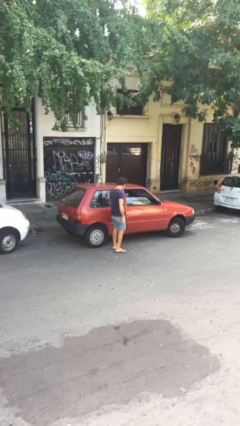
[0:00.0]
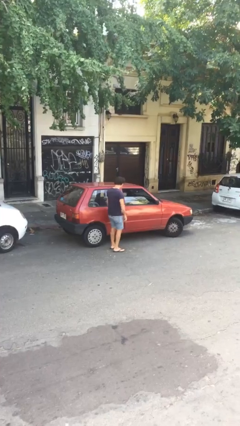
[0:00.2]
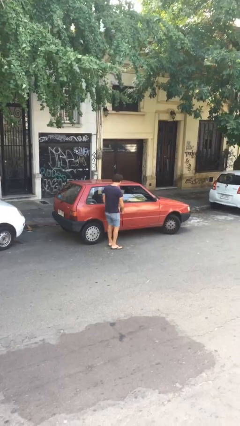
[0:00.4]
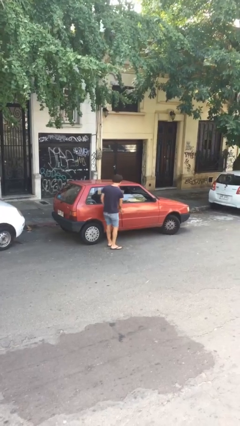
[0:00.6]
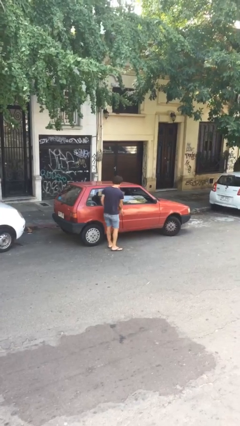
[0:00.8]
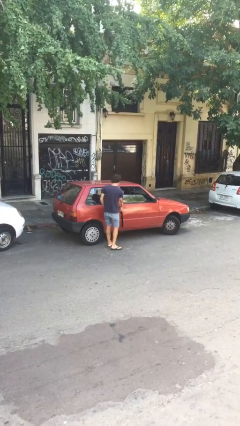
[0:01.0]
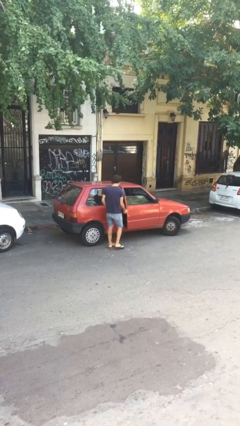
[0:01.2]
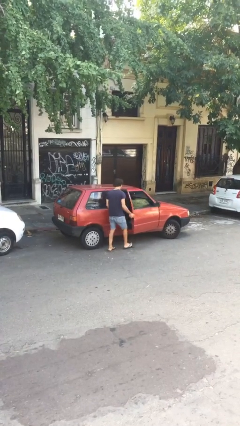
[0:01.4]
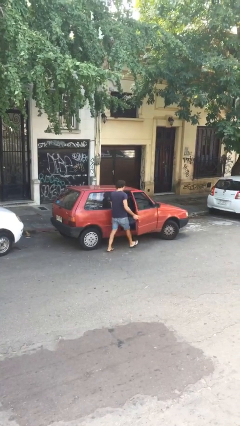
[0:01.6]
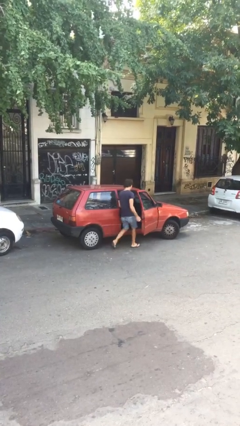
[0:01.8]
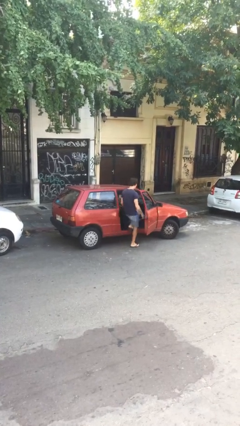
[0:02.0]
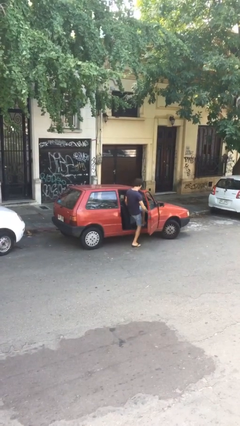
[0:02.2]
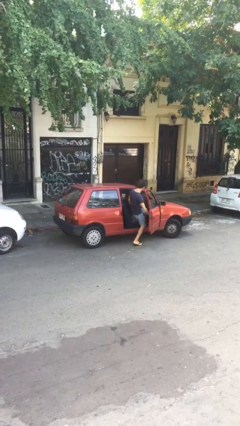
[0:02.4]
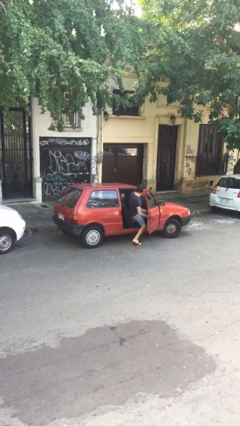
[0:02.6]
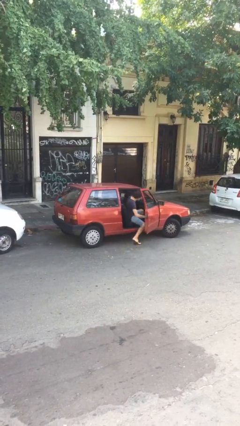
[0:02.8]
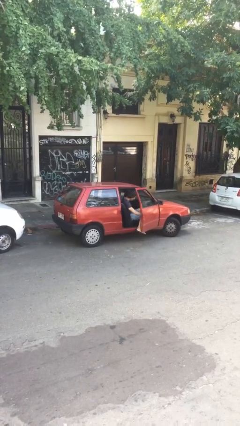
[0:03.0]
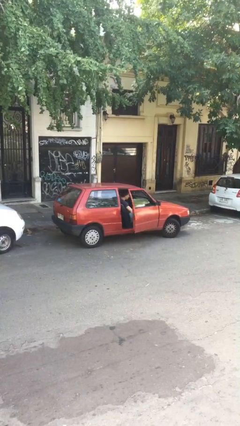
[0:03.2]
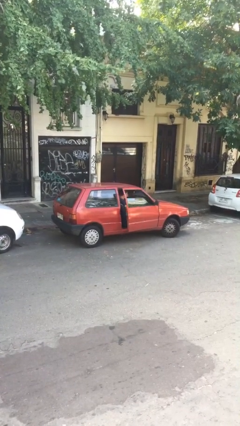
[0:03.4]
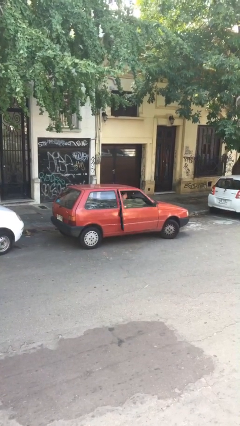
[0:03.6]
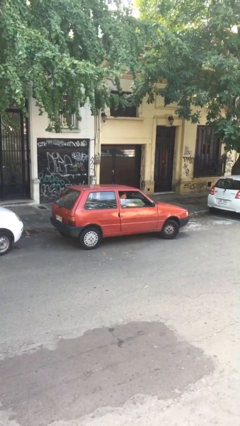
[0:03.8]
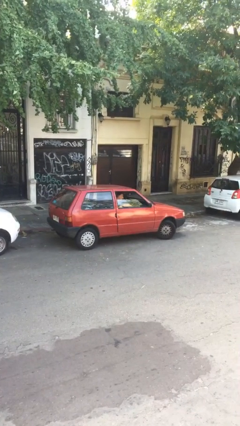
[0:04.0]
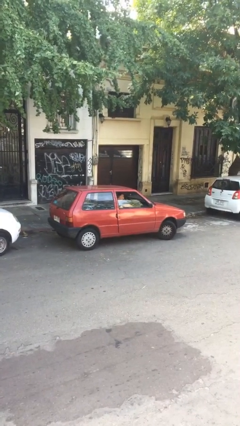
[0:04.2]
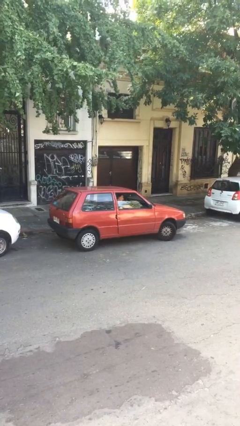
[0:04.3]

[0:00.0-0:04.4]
car picks up person

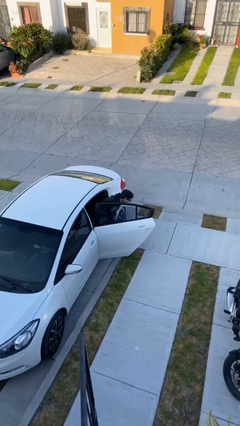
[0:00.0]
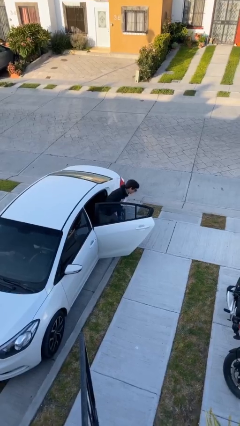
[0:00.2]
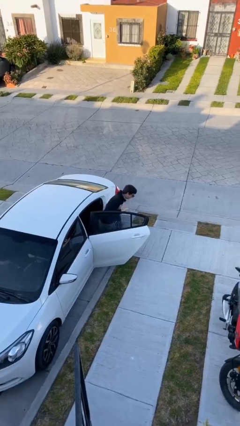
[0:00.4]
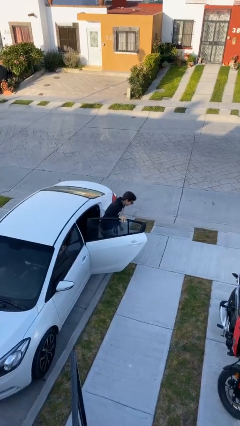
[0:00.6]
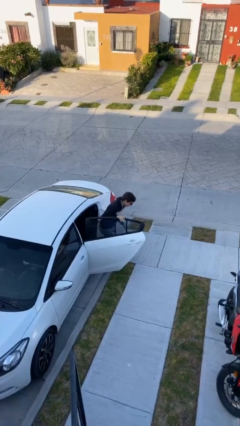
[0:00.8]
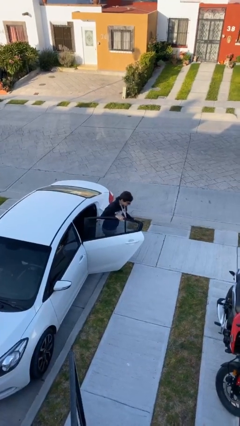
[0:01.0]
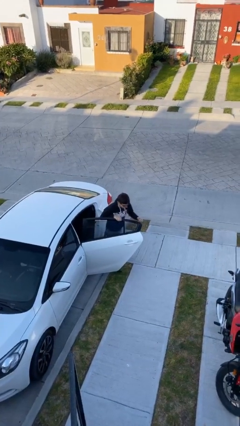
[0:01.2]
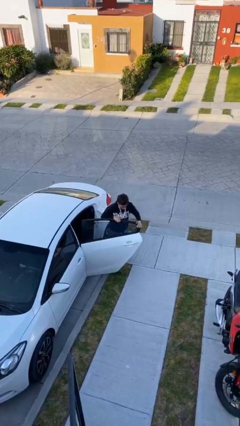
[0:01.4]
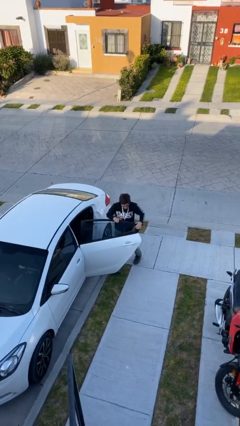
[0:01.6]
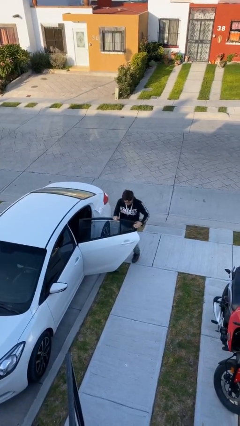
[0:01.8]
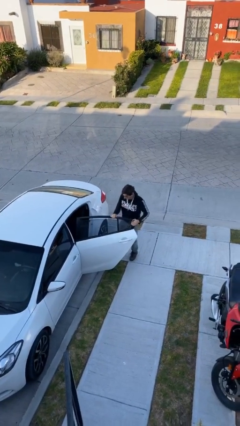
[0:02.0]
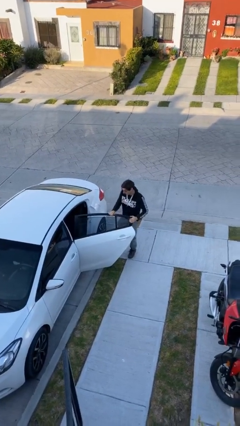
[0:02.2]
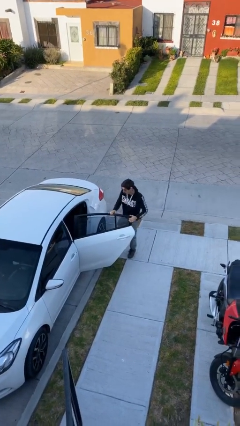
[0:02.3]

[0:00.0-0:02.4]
person exits car

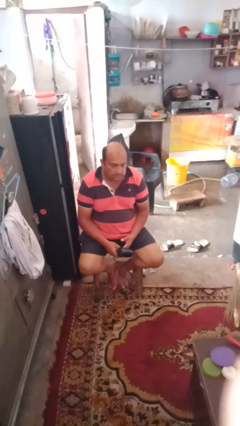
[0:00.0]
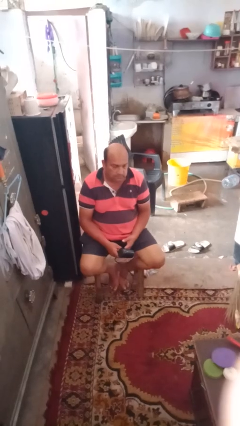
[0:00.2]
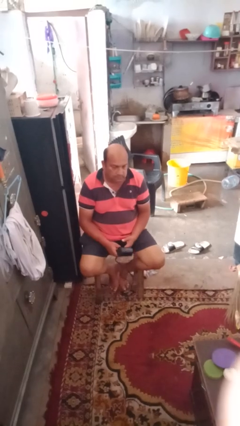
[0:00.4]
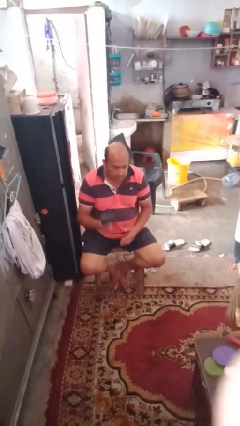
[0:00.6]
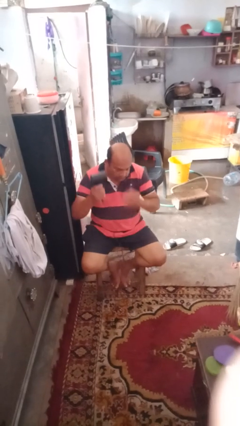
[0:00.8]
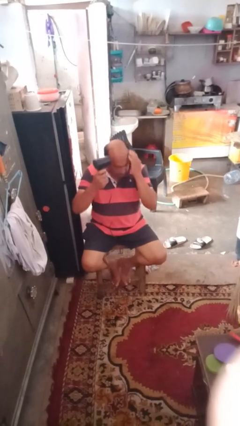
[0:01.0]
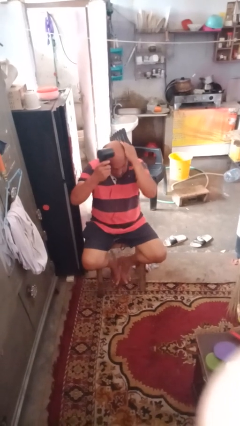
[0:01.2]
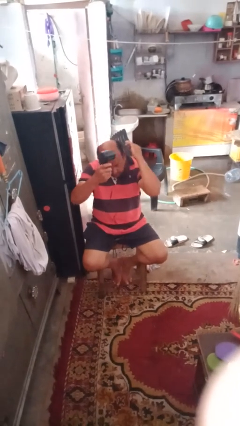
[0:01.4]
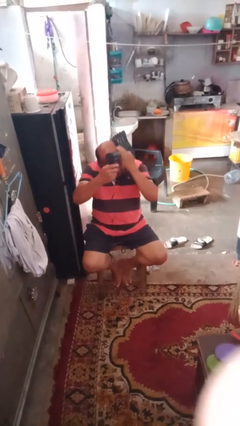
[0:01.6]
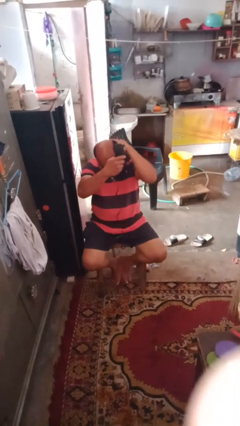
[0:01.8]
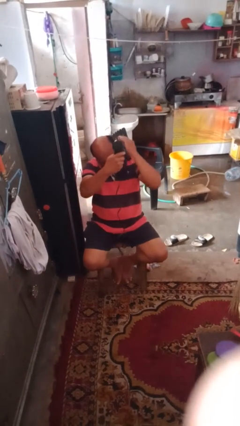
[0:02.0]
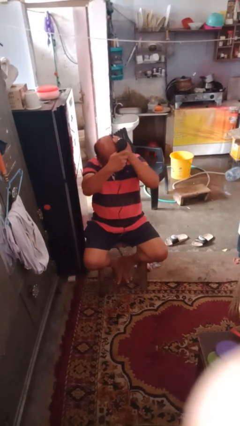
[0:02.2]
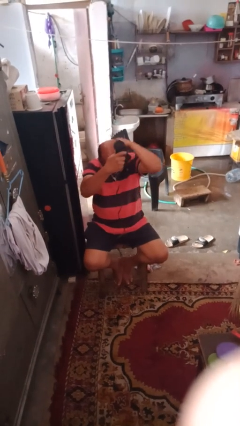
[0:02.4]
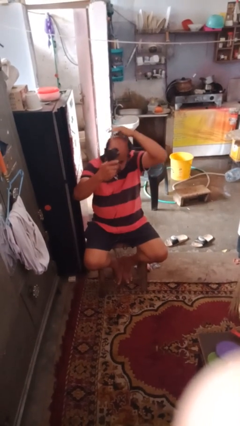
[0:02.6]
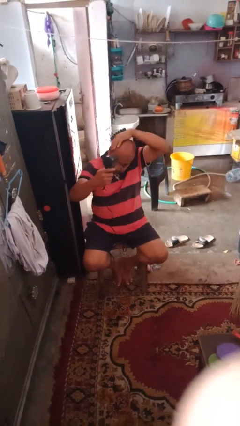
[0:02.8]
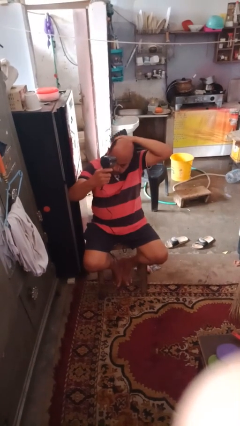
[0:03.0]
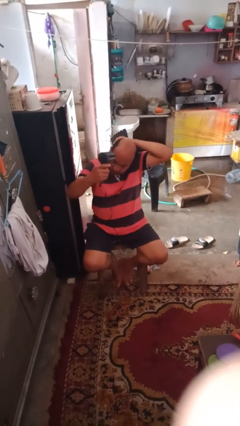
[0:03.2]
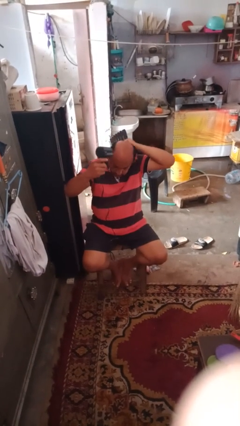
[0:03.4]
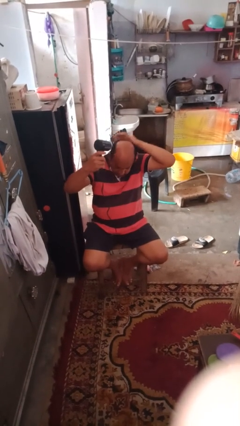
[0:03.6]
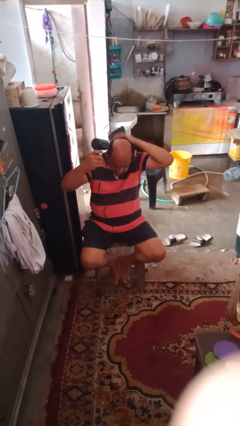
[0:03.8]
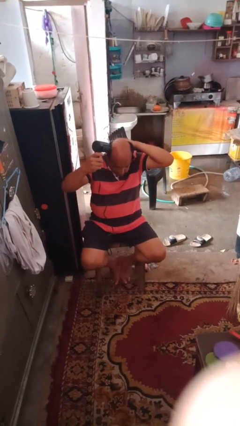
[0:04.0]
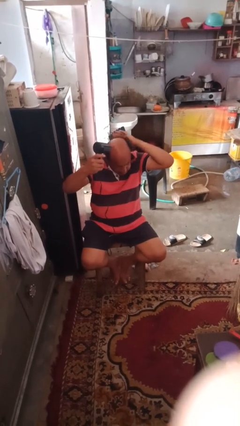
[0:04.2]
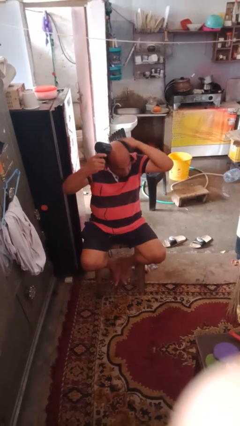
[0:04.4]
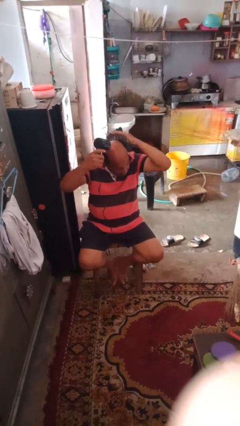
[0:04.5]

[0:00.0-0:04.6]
person dries hair with hairdryer

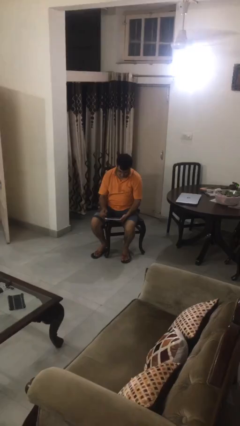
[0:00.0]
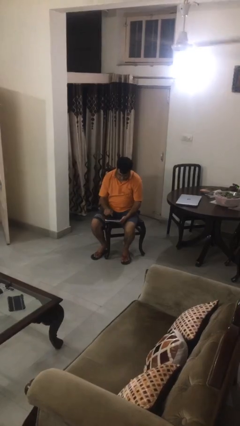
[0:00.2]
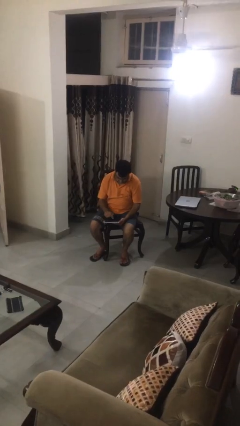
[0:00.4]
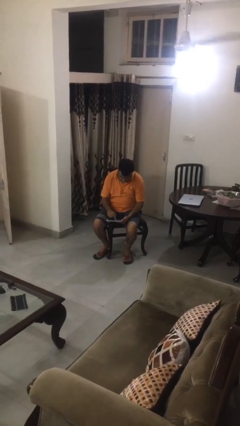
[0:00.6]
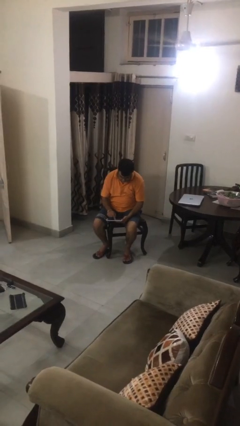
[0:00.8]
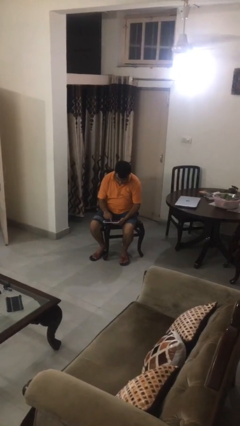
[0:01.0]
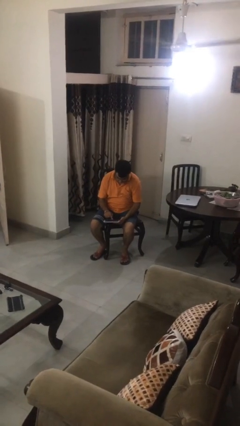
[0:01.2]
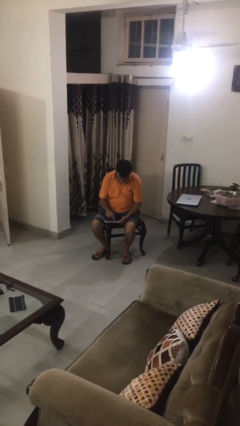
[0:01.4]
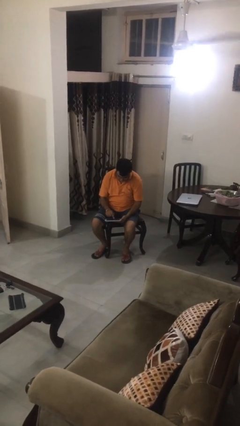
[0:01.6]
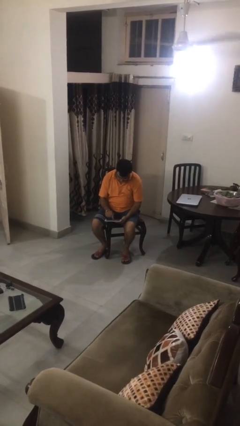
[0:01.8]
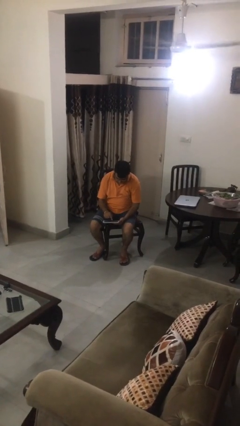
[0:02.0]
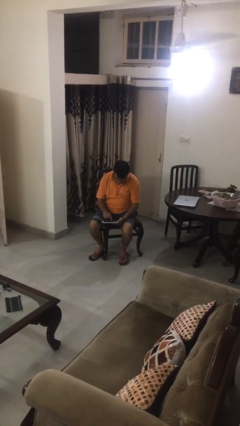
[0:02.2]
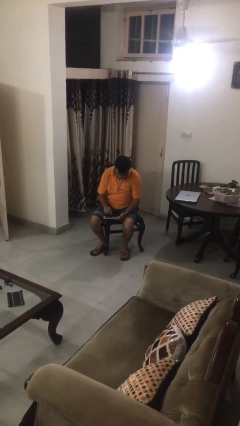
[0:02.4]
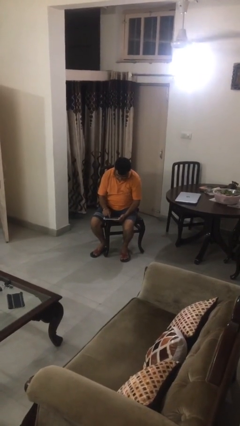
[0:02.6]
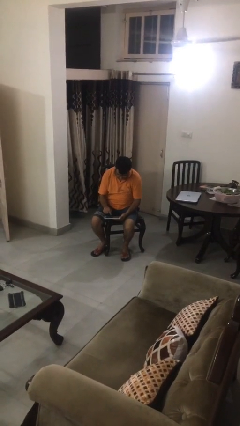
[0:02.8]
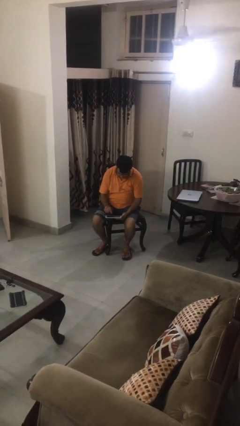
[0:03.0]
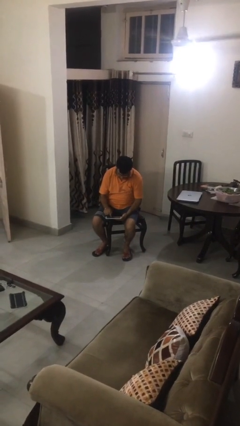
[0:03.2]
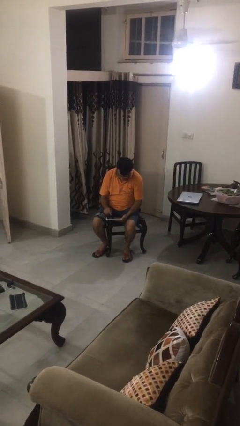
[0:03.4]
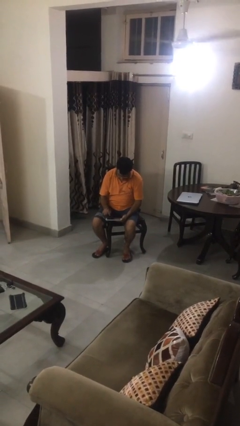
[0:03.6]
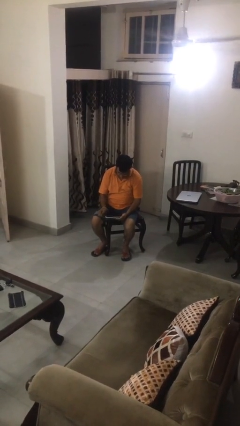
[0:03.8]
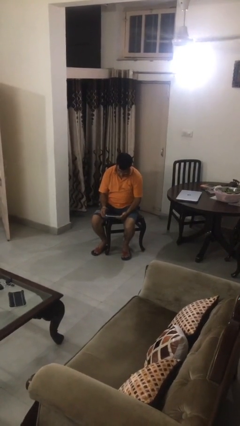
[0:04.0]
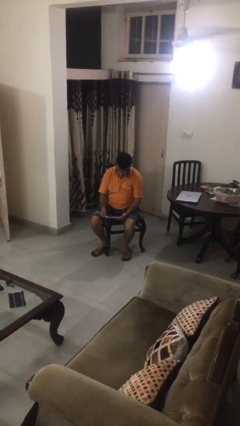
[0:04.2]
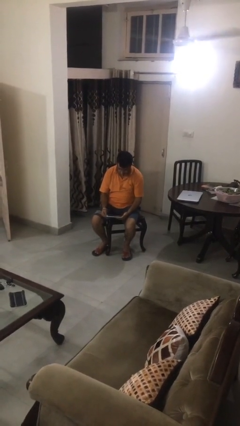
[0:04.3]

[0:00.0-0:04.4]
person interacts with tablet

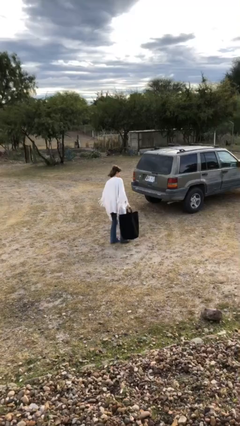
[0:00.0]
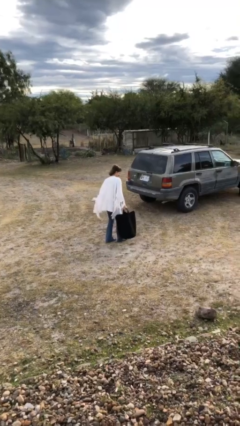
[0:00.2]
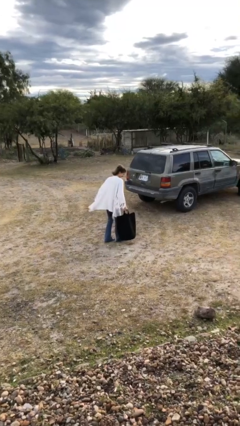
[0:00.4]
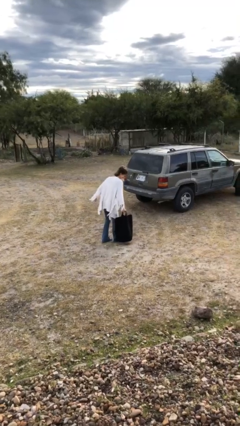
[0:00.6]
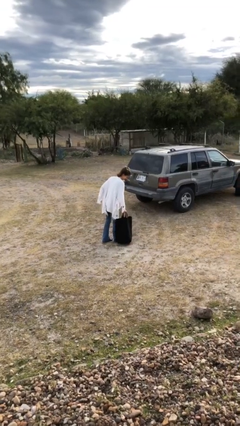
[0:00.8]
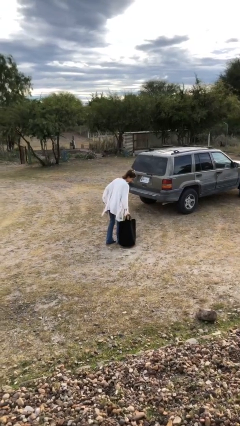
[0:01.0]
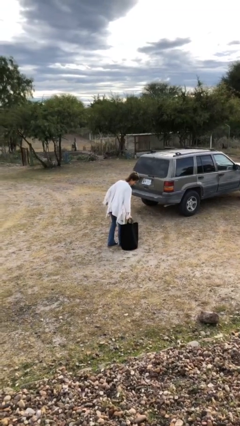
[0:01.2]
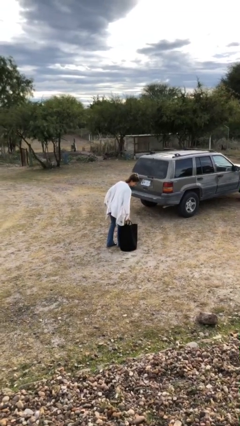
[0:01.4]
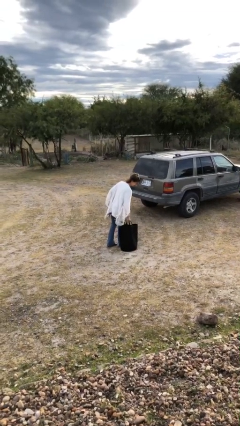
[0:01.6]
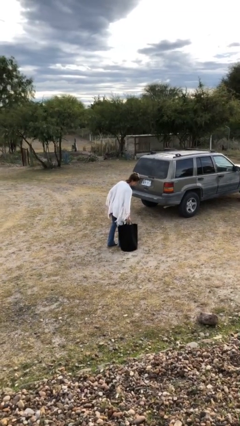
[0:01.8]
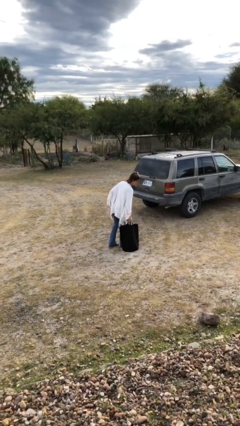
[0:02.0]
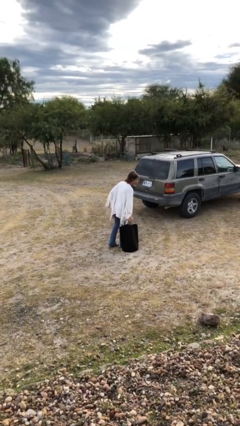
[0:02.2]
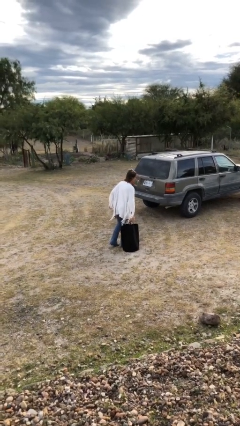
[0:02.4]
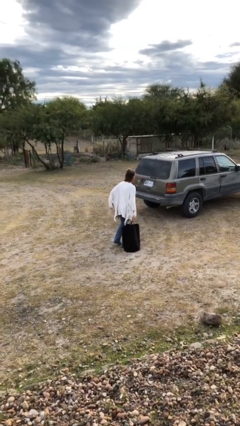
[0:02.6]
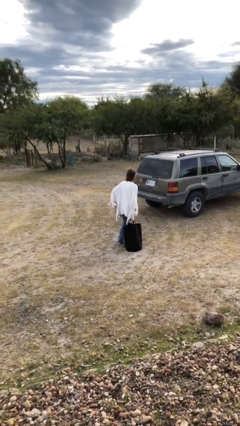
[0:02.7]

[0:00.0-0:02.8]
person puts down object on floor
